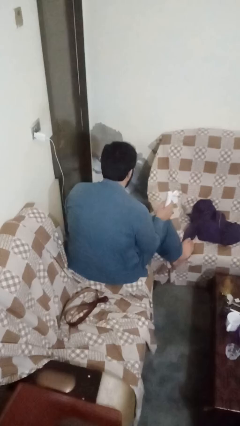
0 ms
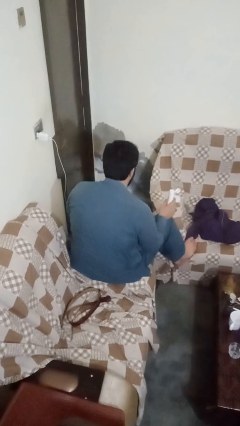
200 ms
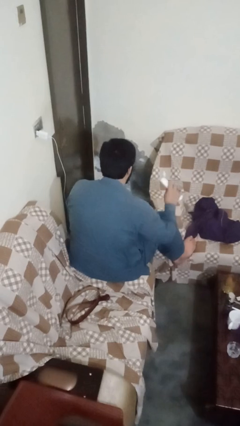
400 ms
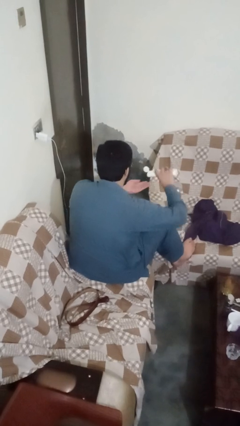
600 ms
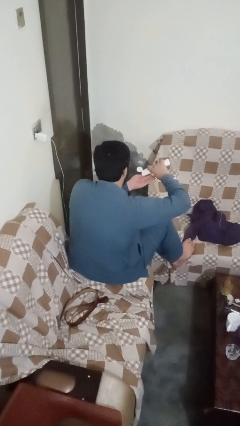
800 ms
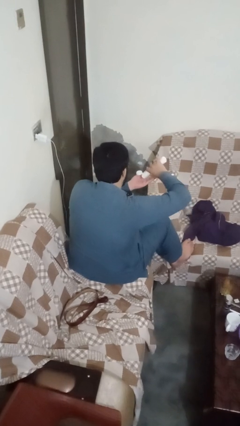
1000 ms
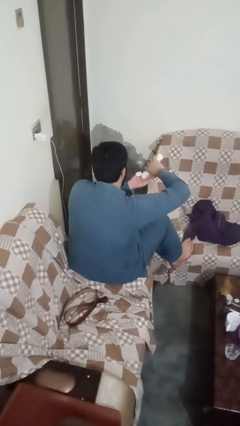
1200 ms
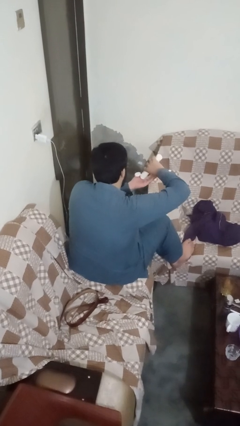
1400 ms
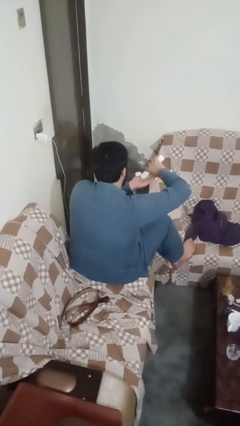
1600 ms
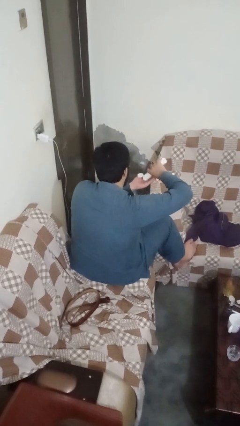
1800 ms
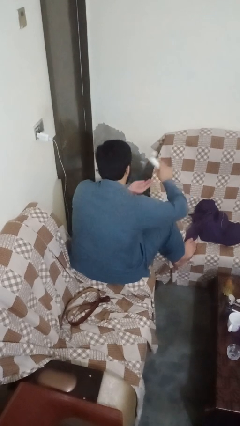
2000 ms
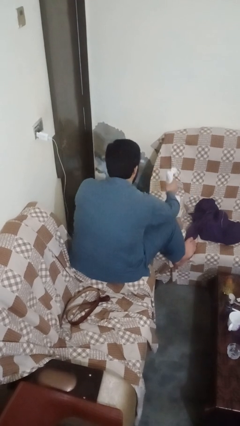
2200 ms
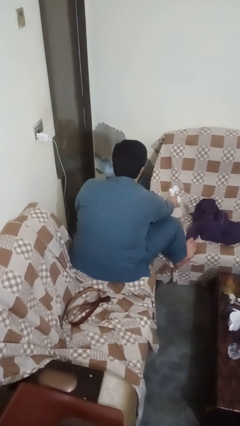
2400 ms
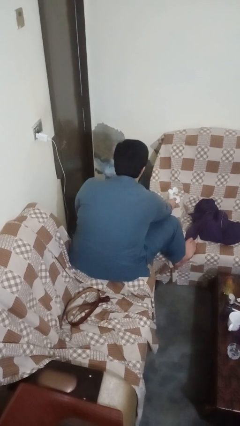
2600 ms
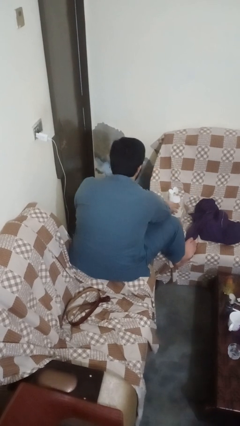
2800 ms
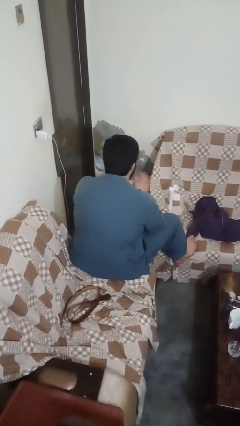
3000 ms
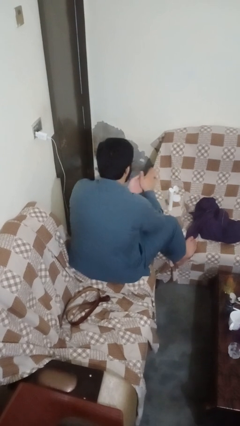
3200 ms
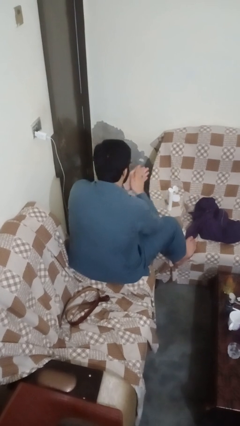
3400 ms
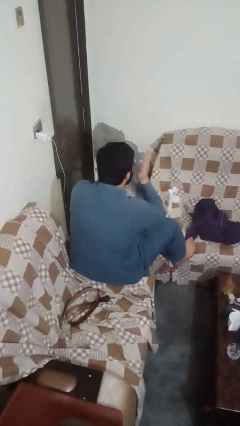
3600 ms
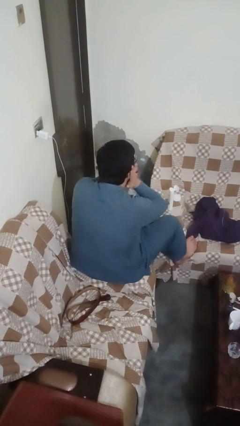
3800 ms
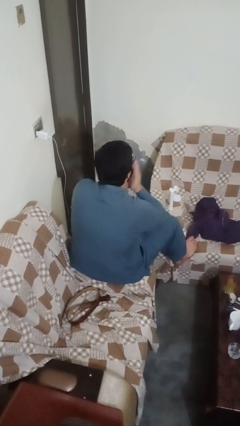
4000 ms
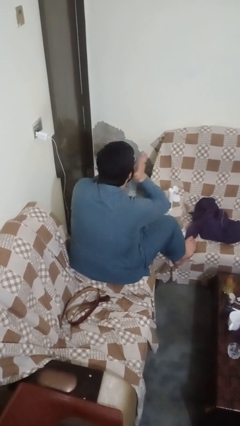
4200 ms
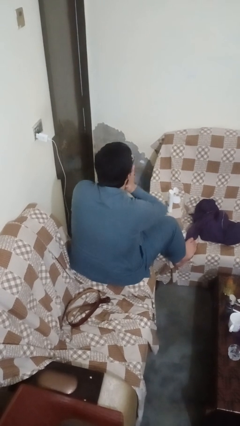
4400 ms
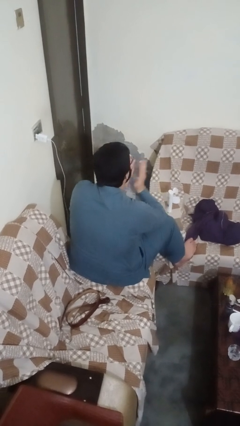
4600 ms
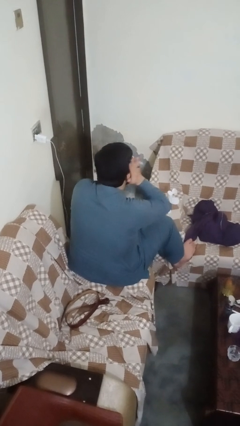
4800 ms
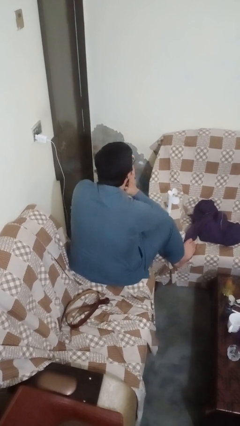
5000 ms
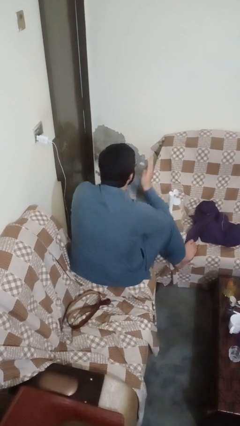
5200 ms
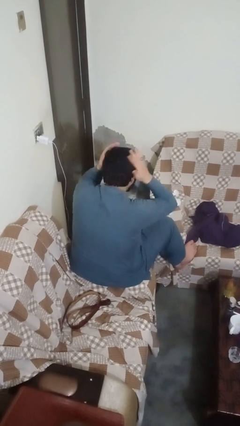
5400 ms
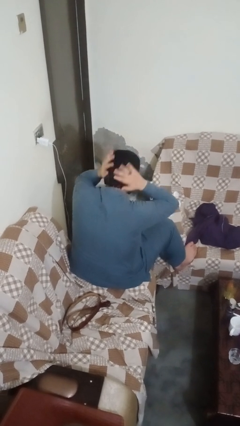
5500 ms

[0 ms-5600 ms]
person applies facial moisturizer

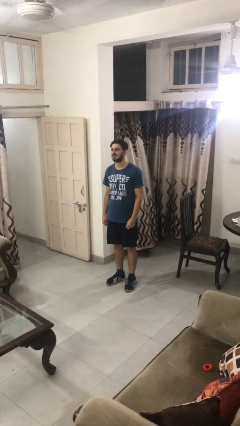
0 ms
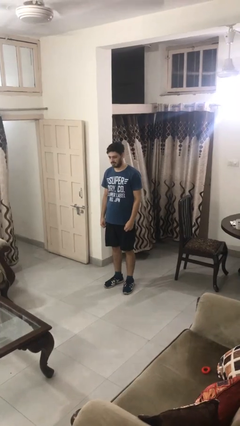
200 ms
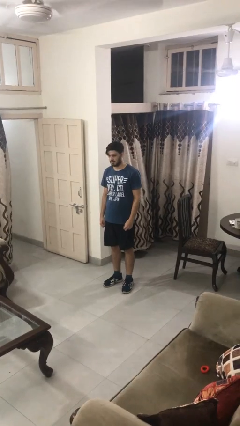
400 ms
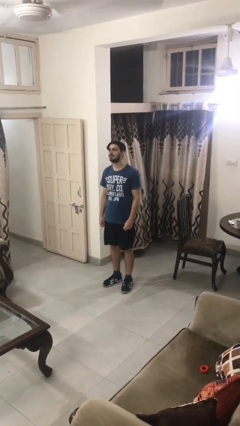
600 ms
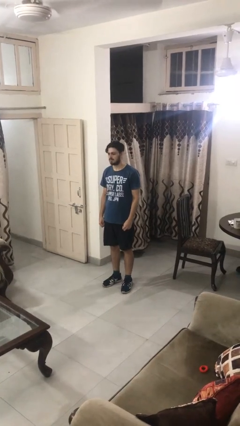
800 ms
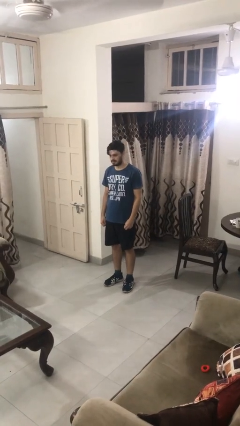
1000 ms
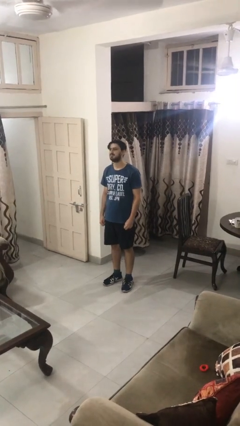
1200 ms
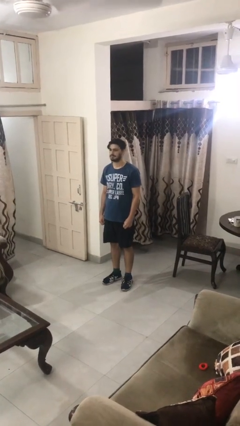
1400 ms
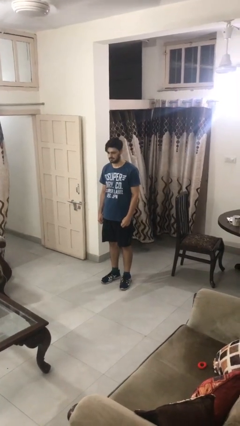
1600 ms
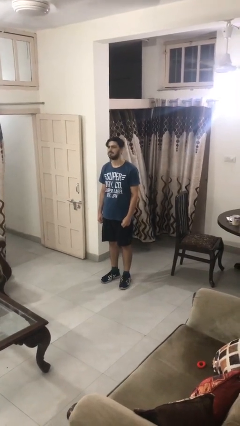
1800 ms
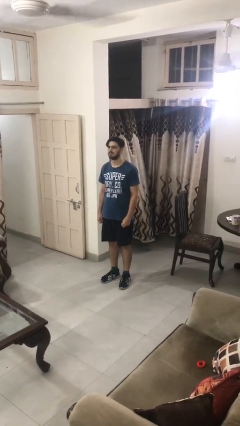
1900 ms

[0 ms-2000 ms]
person nods head

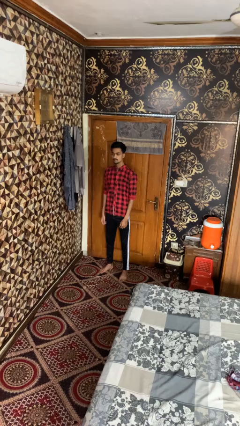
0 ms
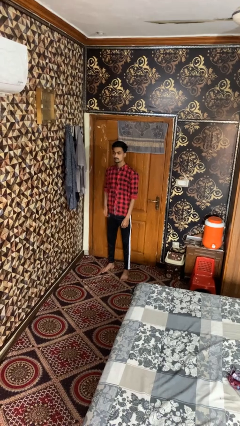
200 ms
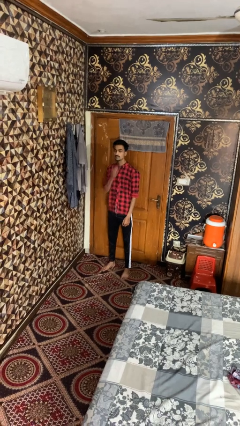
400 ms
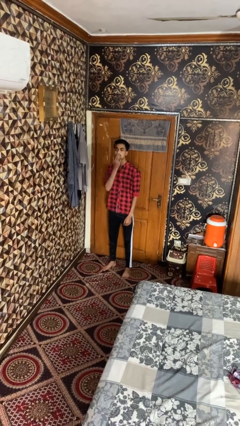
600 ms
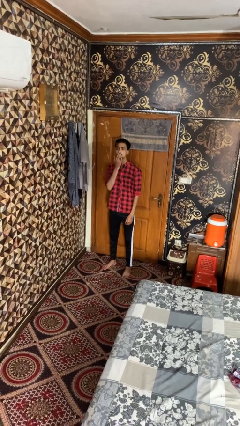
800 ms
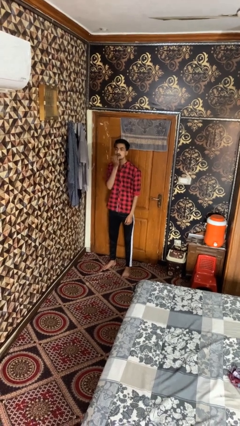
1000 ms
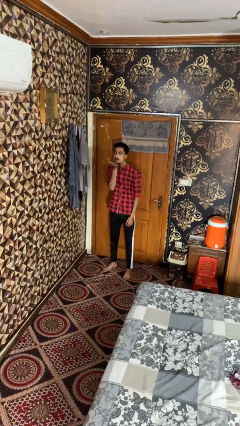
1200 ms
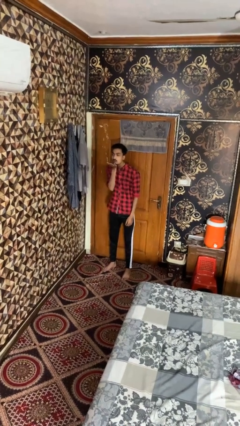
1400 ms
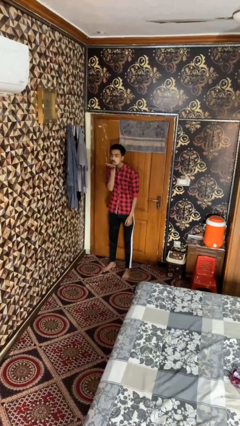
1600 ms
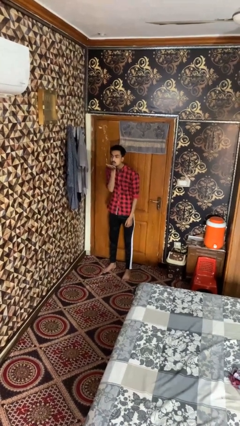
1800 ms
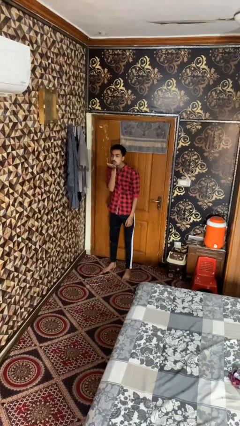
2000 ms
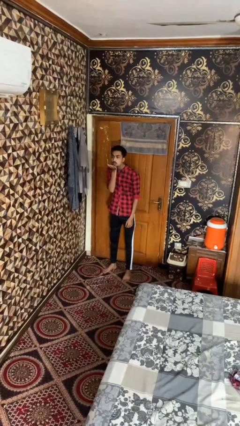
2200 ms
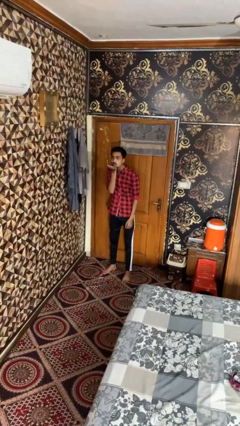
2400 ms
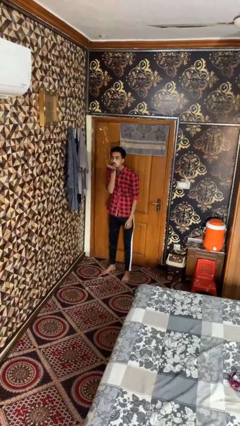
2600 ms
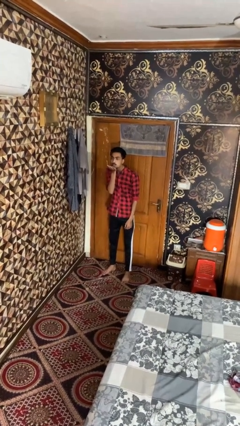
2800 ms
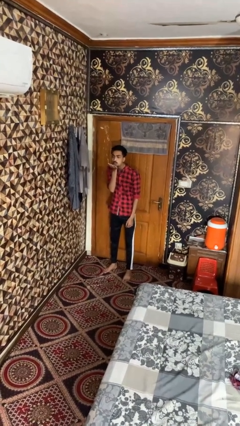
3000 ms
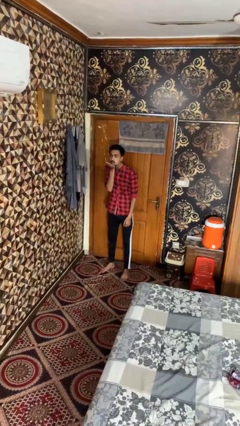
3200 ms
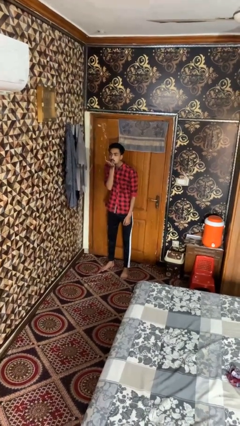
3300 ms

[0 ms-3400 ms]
person gestures blow kiss

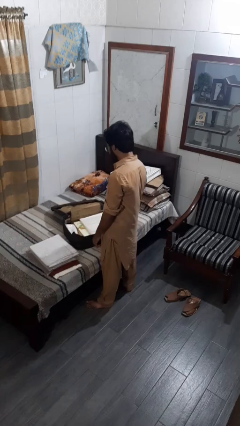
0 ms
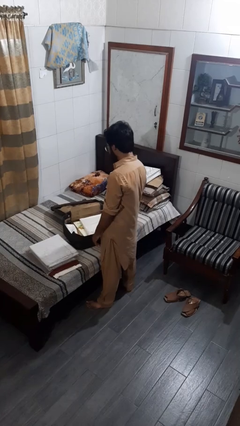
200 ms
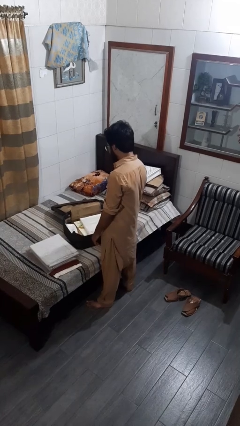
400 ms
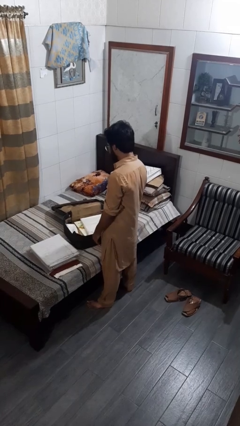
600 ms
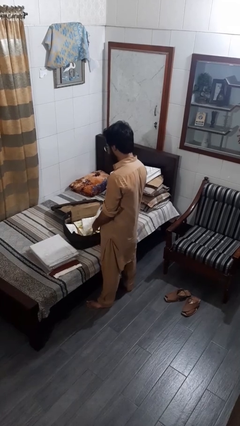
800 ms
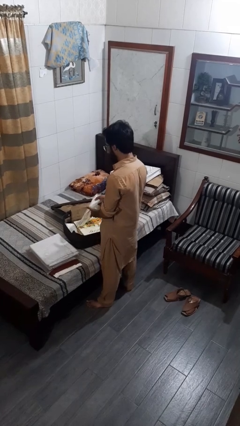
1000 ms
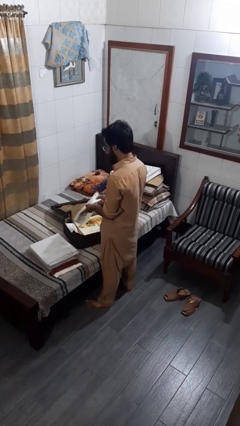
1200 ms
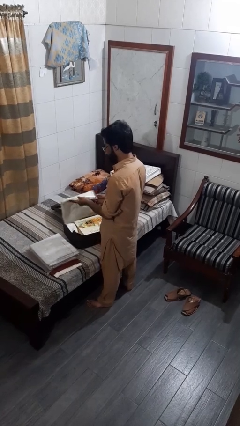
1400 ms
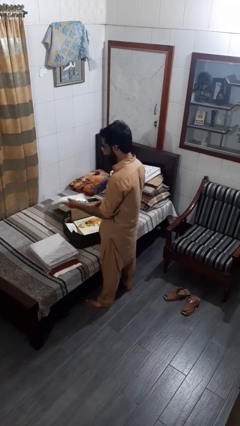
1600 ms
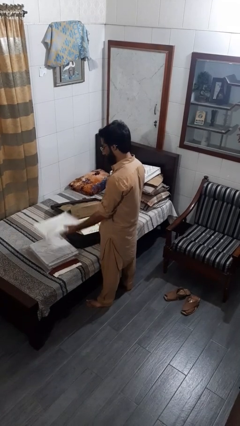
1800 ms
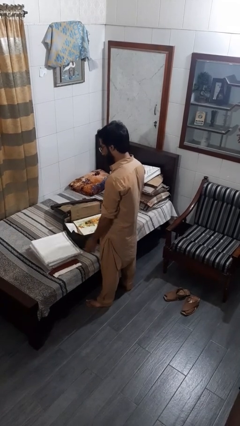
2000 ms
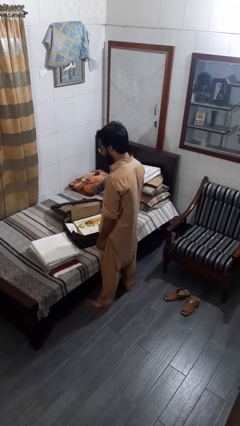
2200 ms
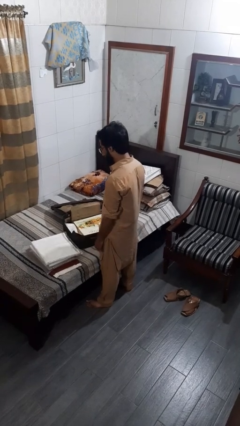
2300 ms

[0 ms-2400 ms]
person unloads clothes from suitcase

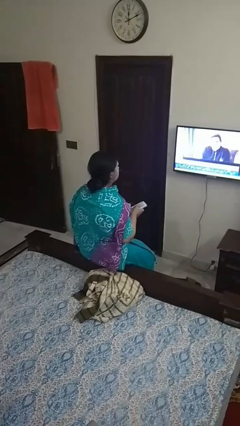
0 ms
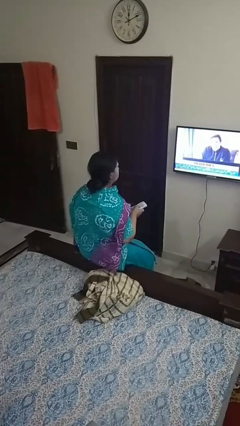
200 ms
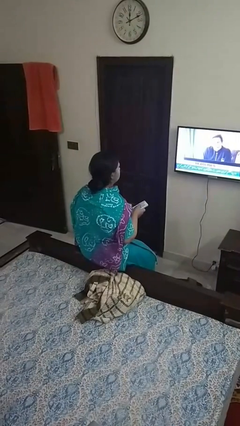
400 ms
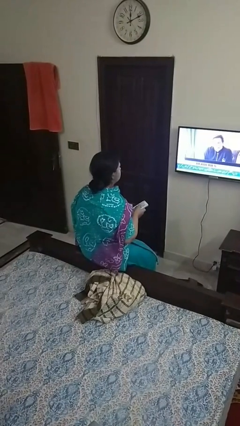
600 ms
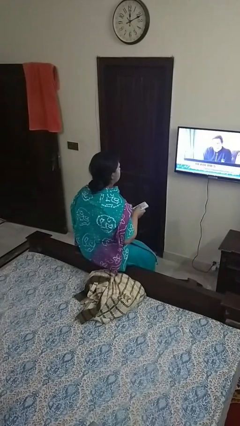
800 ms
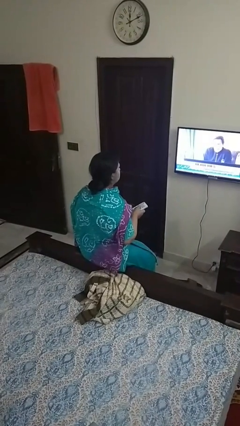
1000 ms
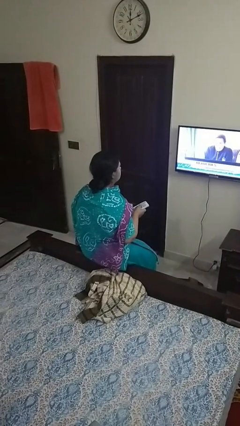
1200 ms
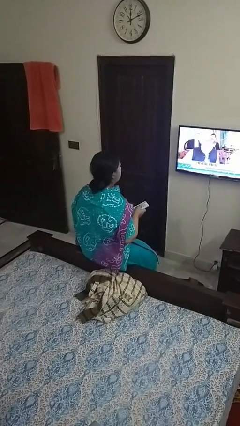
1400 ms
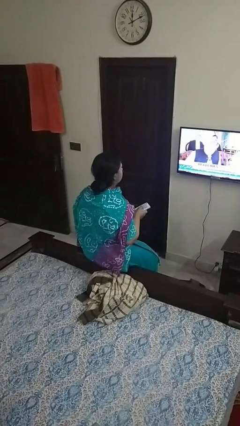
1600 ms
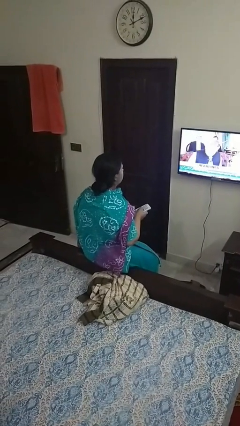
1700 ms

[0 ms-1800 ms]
person uses television remote

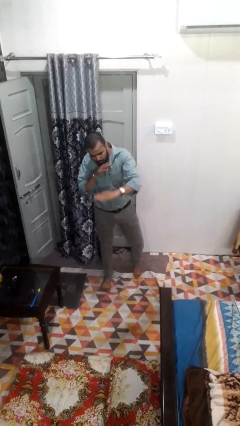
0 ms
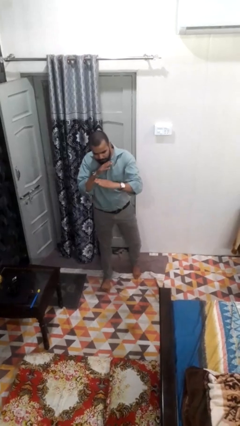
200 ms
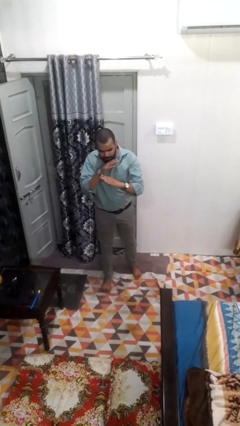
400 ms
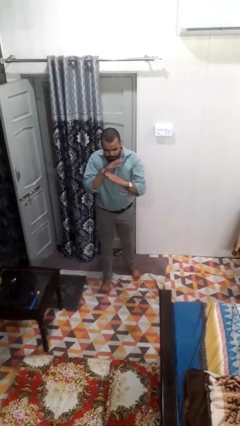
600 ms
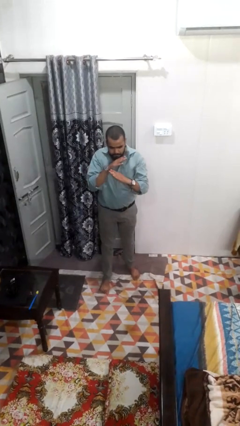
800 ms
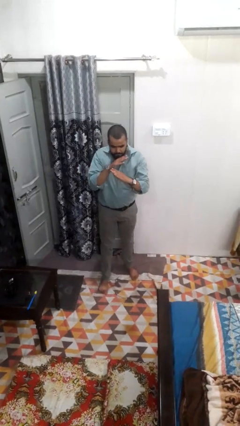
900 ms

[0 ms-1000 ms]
person karate chop

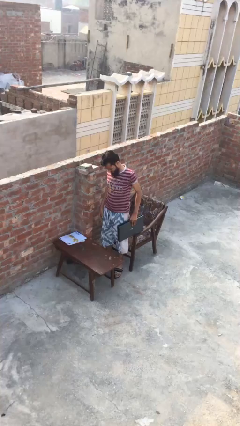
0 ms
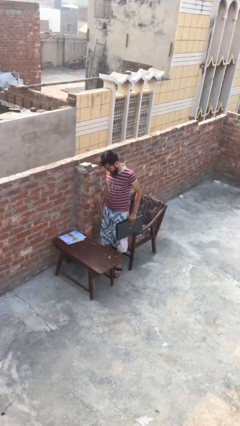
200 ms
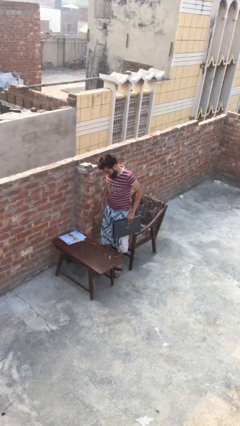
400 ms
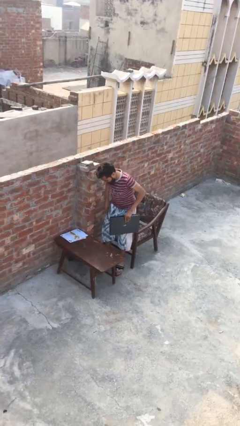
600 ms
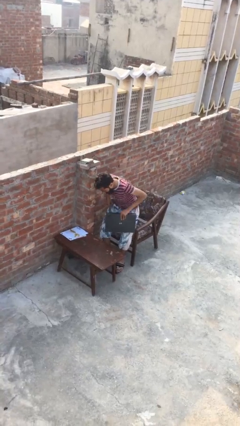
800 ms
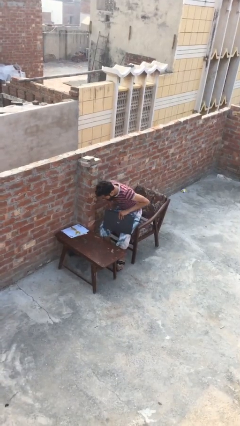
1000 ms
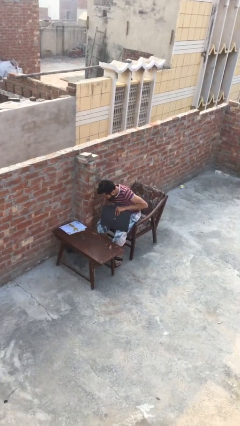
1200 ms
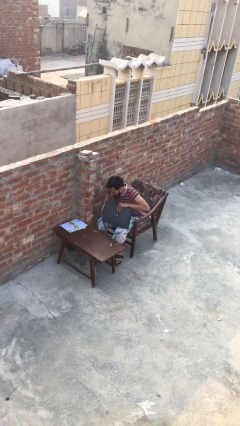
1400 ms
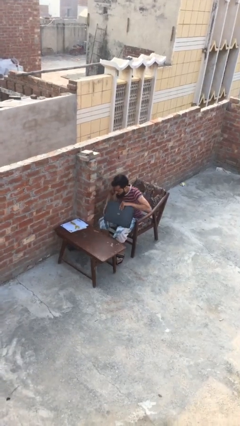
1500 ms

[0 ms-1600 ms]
person sits down
